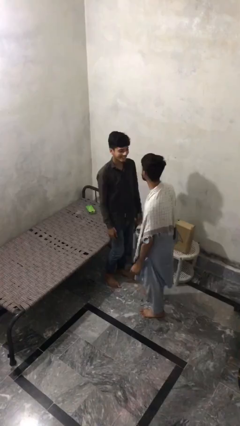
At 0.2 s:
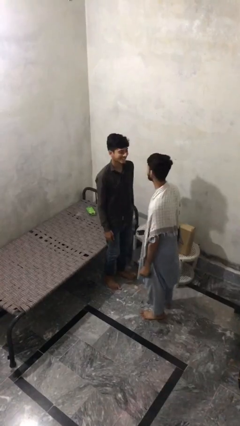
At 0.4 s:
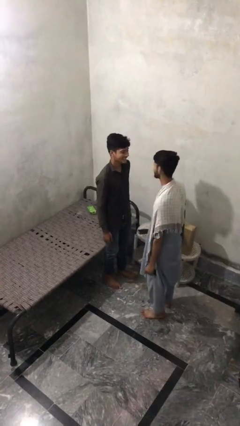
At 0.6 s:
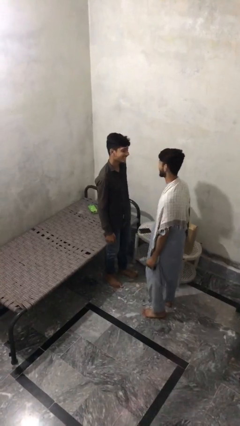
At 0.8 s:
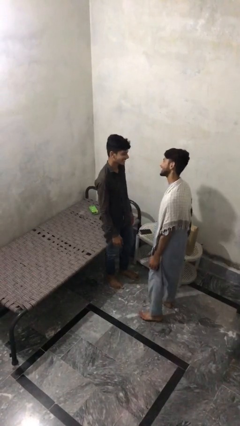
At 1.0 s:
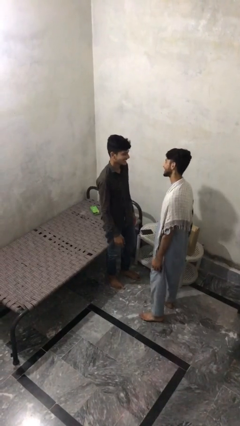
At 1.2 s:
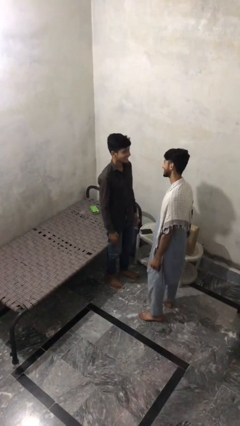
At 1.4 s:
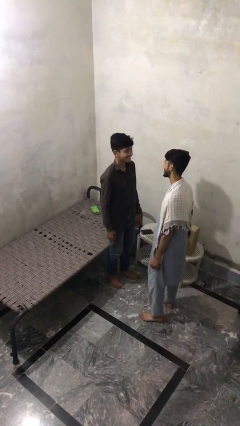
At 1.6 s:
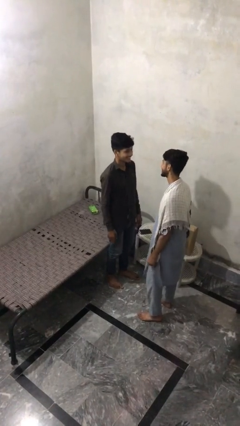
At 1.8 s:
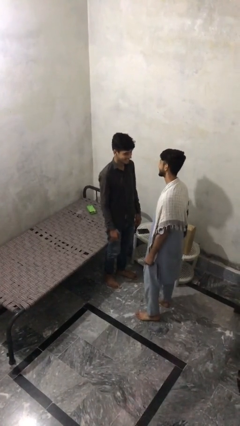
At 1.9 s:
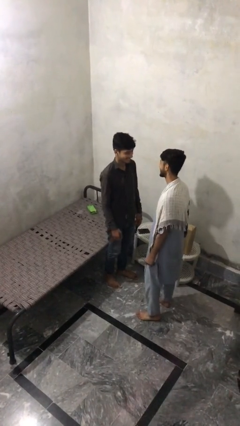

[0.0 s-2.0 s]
person talks to person

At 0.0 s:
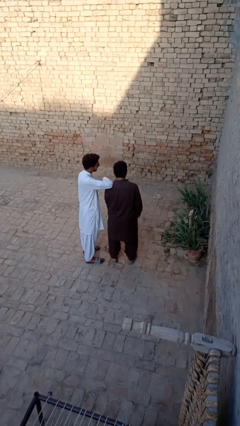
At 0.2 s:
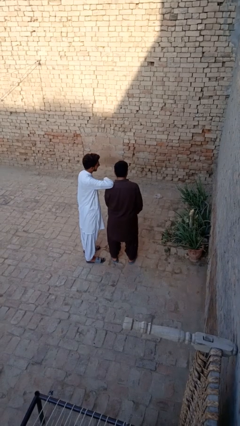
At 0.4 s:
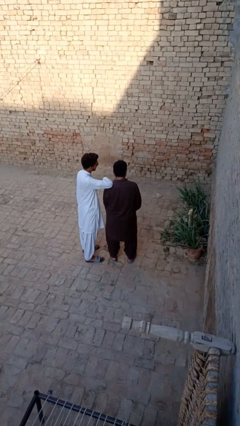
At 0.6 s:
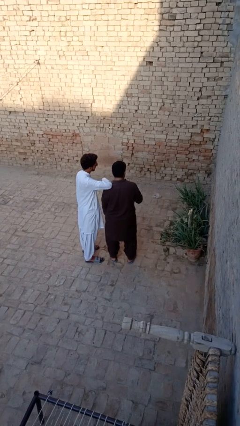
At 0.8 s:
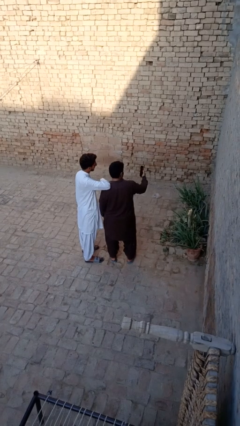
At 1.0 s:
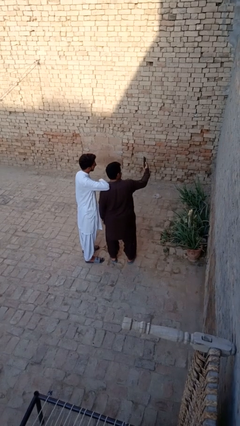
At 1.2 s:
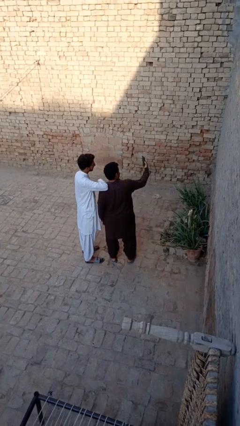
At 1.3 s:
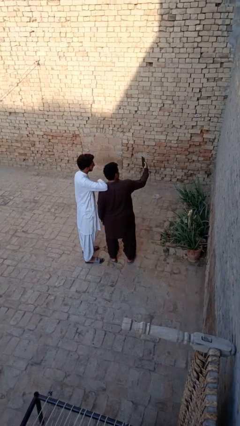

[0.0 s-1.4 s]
person takes selfie with person

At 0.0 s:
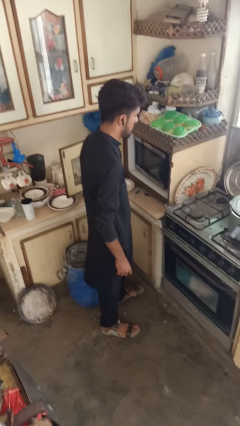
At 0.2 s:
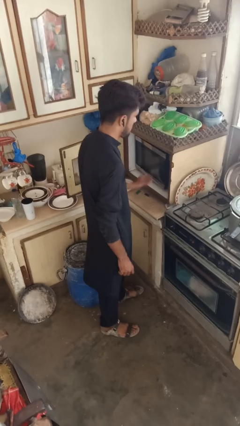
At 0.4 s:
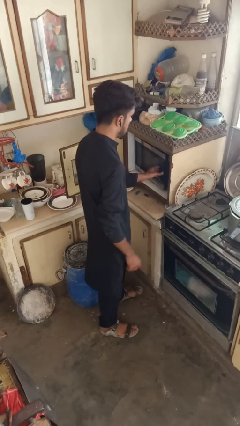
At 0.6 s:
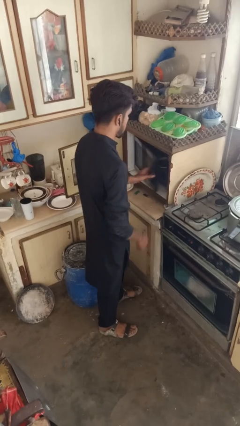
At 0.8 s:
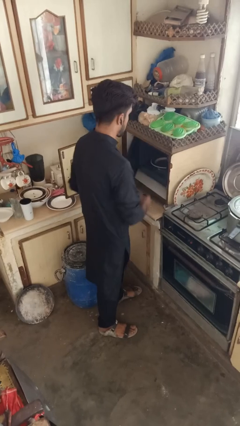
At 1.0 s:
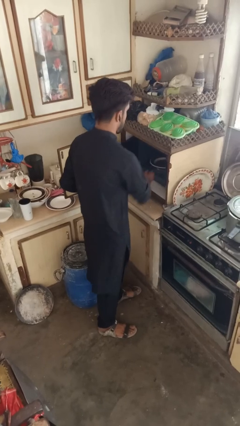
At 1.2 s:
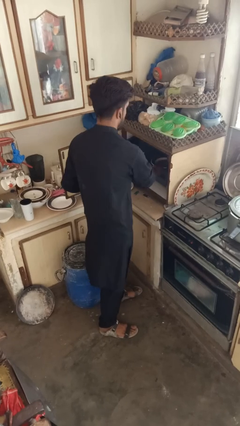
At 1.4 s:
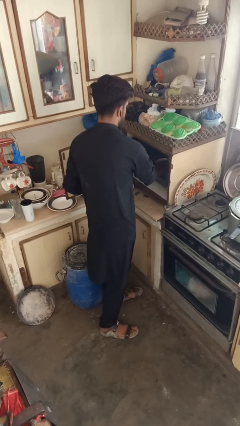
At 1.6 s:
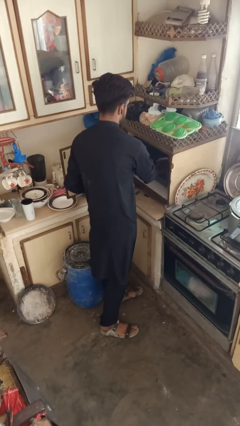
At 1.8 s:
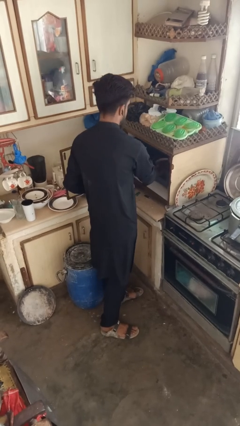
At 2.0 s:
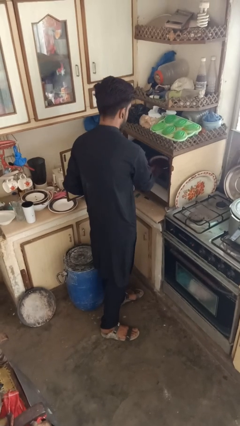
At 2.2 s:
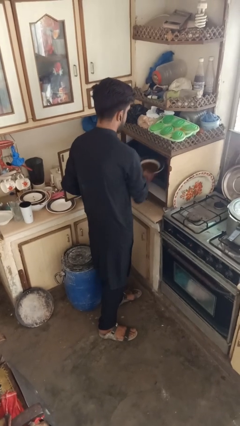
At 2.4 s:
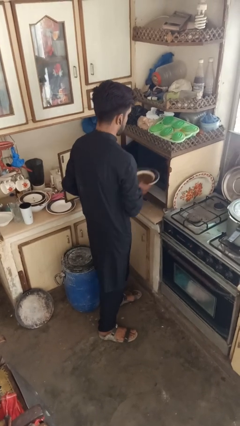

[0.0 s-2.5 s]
person takes object from microwave

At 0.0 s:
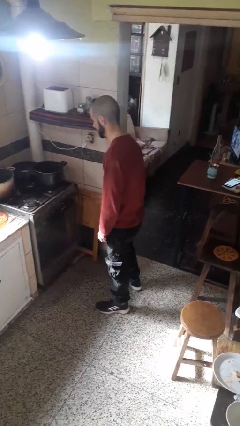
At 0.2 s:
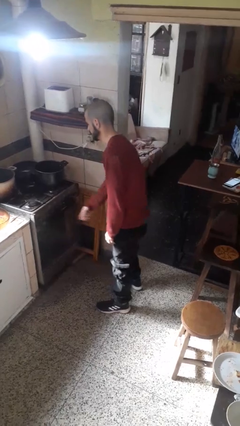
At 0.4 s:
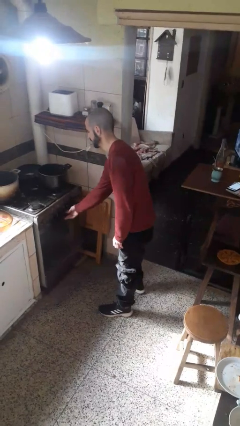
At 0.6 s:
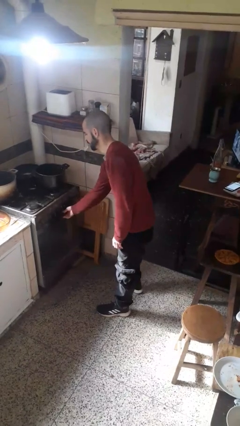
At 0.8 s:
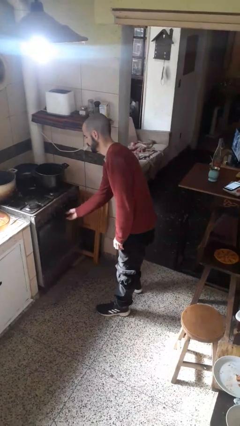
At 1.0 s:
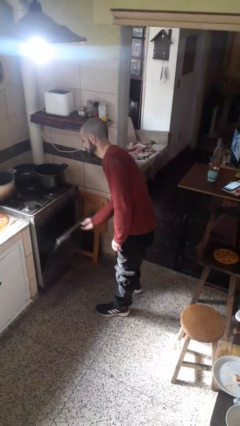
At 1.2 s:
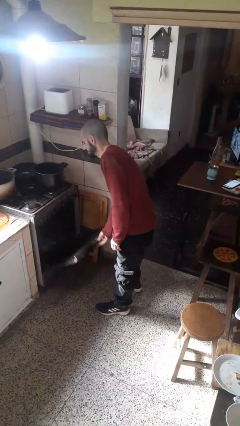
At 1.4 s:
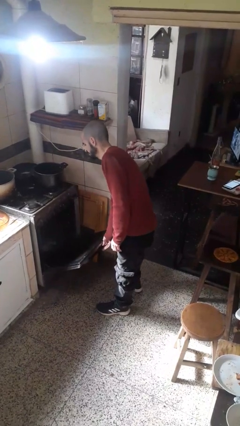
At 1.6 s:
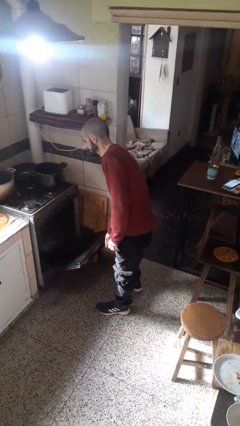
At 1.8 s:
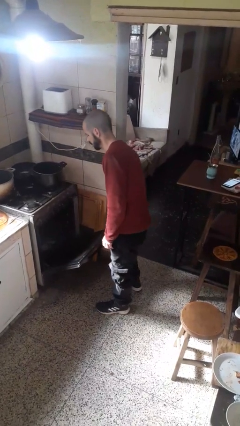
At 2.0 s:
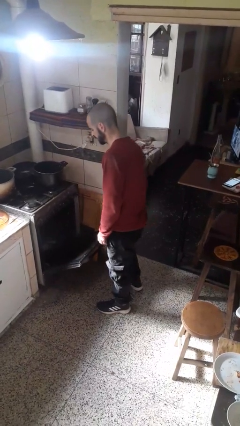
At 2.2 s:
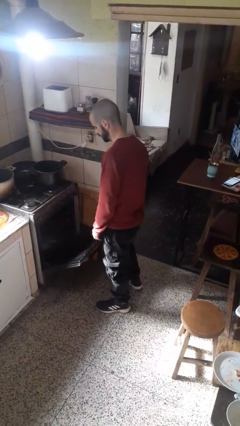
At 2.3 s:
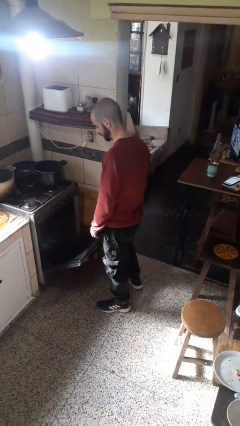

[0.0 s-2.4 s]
person opens oven door

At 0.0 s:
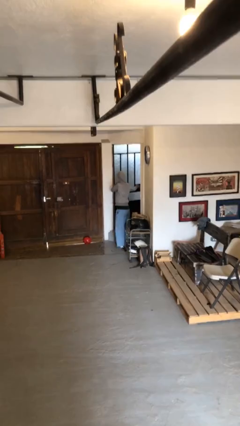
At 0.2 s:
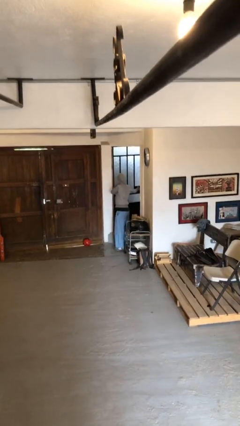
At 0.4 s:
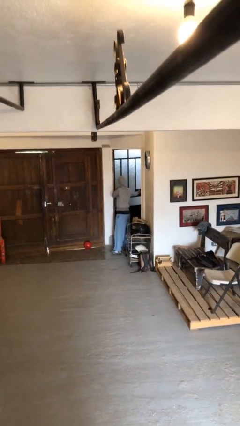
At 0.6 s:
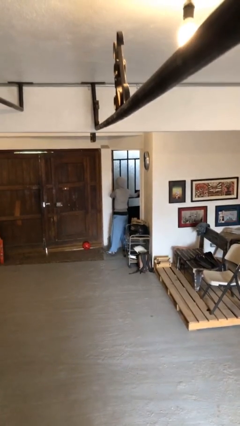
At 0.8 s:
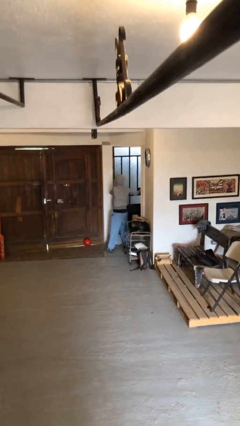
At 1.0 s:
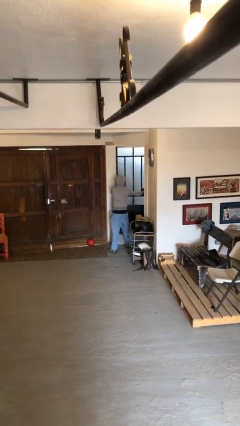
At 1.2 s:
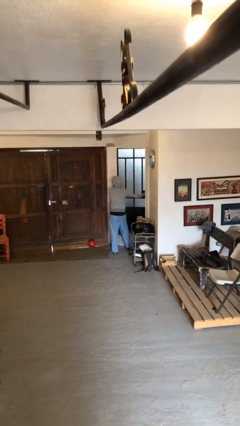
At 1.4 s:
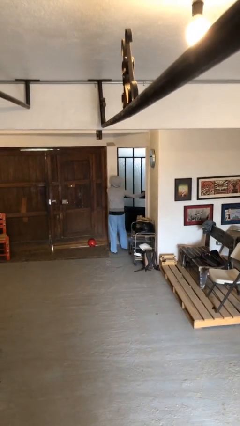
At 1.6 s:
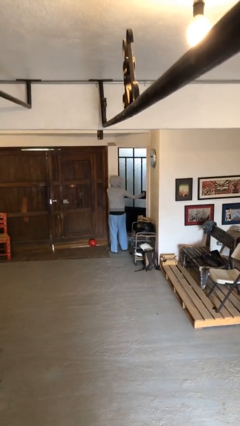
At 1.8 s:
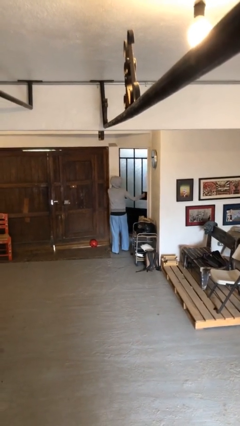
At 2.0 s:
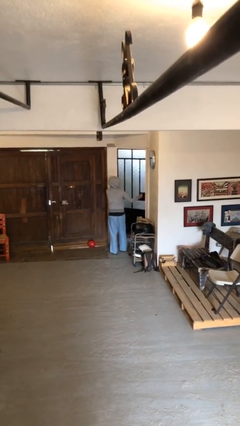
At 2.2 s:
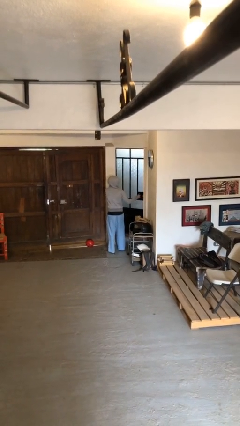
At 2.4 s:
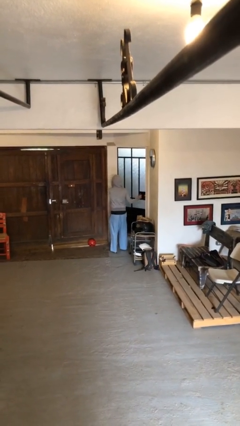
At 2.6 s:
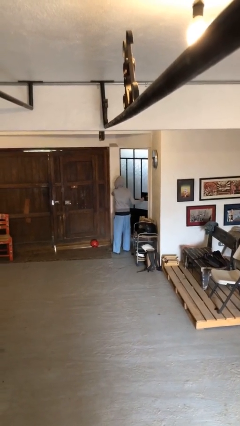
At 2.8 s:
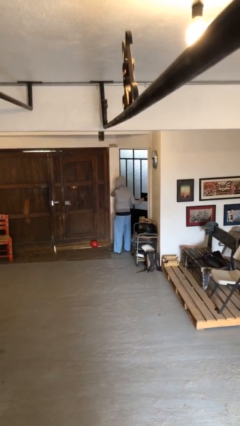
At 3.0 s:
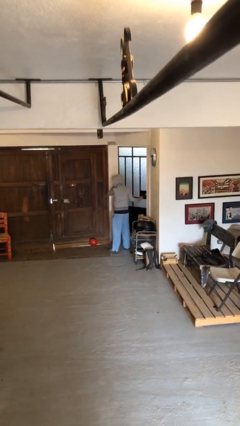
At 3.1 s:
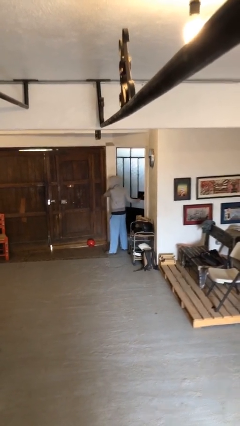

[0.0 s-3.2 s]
person closes facility door

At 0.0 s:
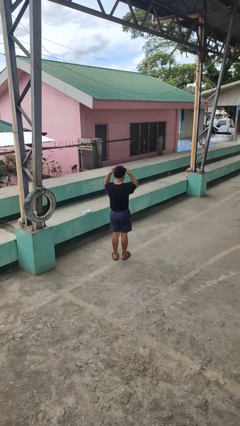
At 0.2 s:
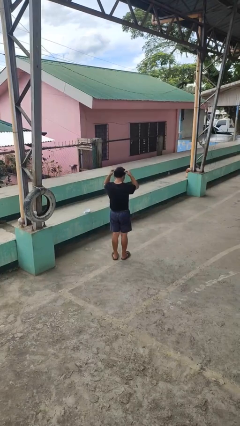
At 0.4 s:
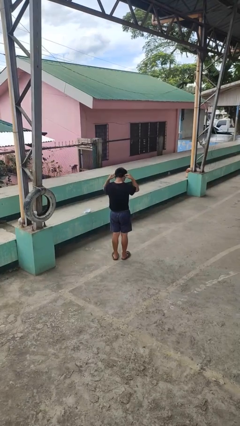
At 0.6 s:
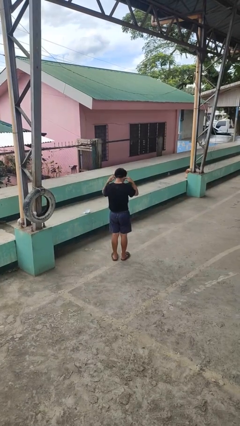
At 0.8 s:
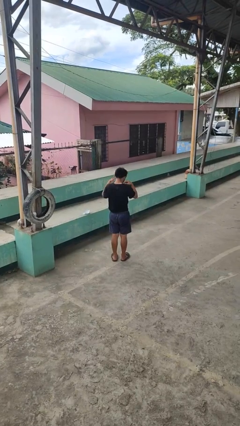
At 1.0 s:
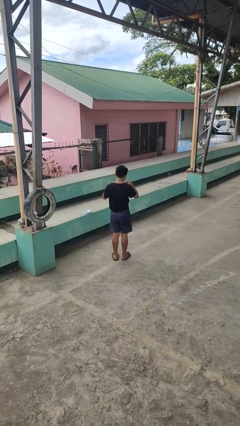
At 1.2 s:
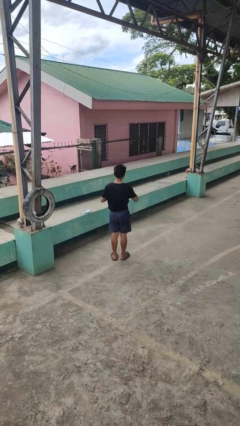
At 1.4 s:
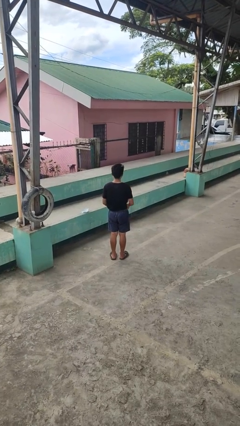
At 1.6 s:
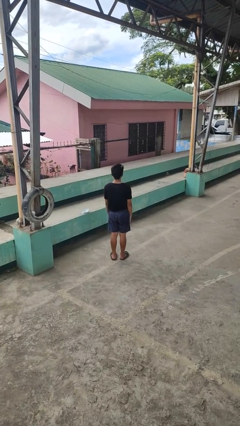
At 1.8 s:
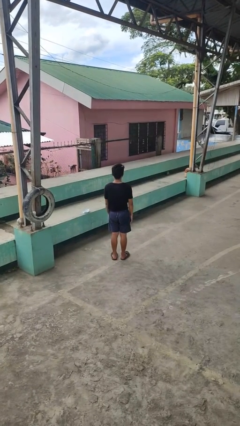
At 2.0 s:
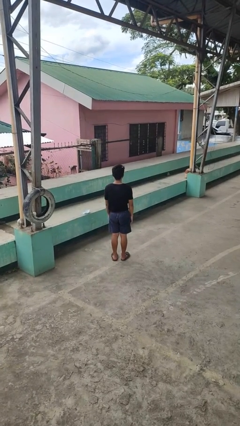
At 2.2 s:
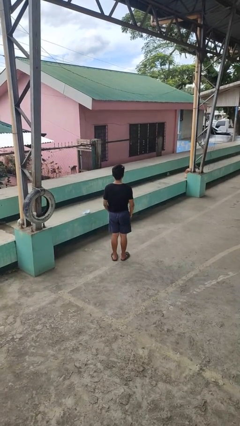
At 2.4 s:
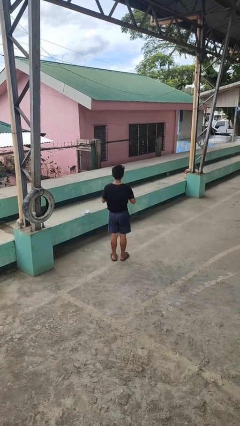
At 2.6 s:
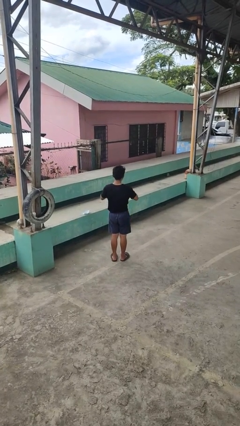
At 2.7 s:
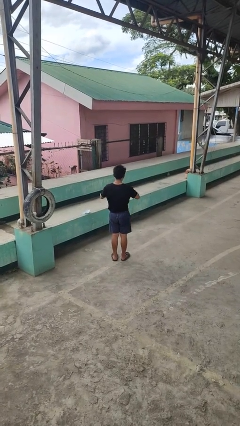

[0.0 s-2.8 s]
person puts on necklace

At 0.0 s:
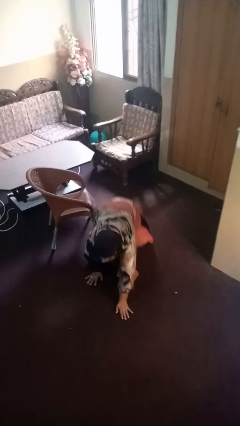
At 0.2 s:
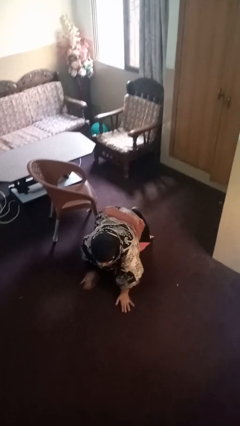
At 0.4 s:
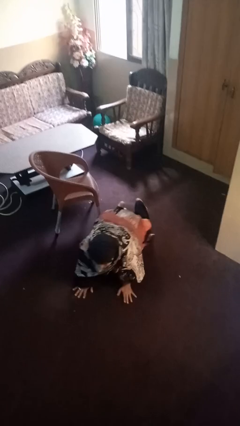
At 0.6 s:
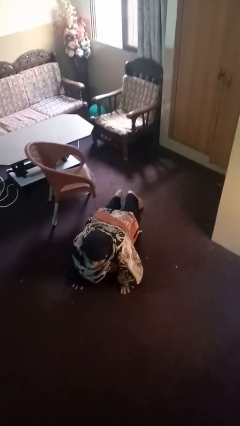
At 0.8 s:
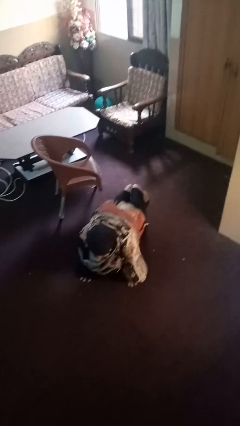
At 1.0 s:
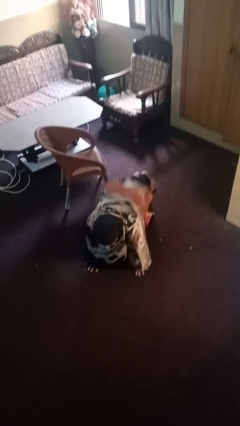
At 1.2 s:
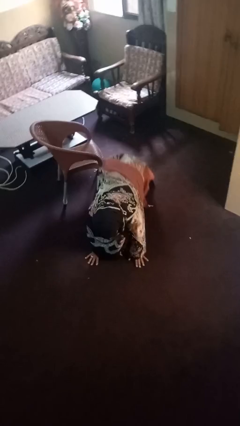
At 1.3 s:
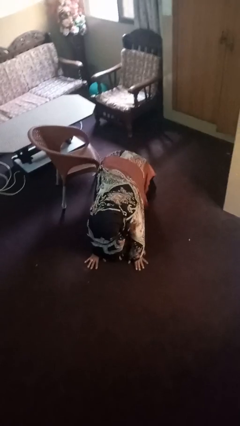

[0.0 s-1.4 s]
person lies down on floor

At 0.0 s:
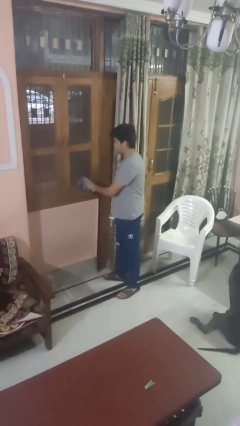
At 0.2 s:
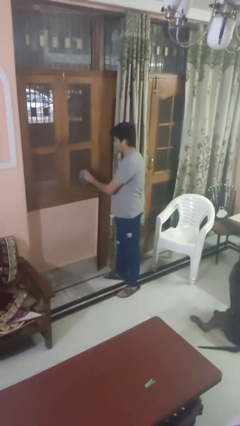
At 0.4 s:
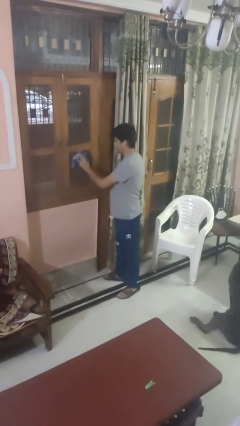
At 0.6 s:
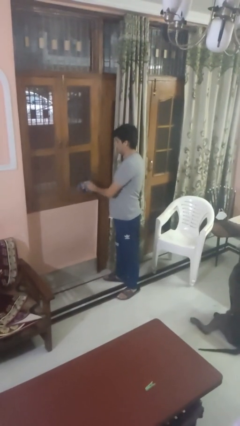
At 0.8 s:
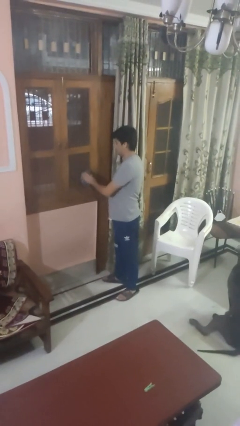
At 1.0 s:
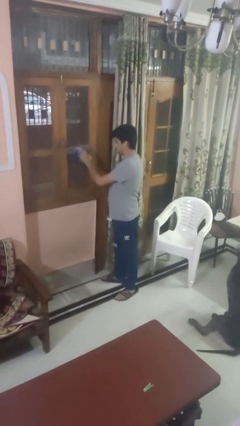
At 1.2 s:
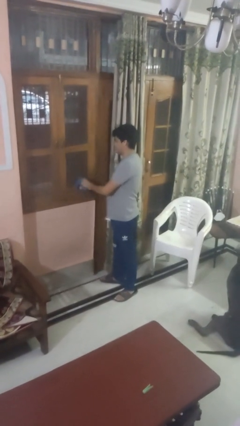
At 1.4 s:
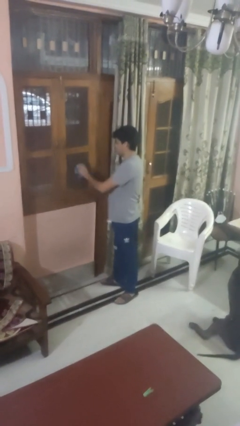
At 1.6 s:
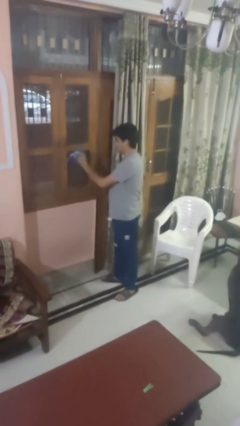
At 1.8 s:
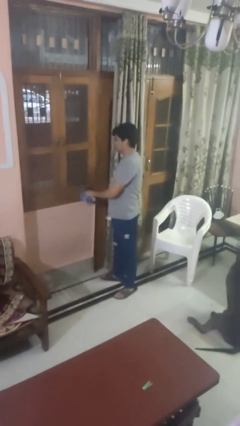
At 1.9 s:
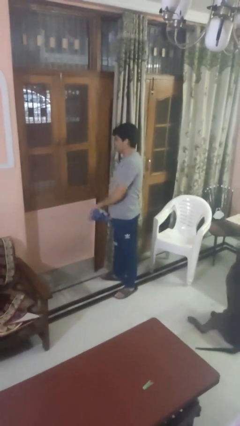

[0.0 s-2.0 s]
person washes window
